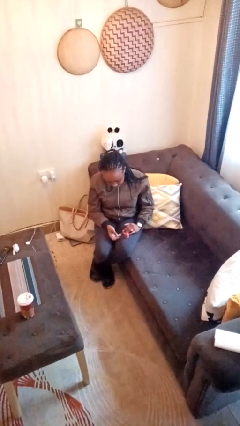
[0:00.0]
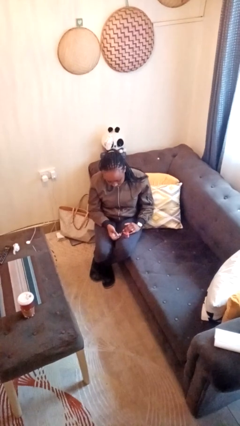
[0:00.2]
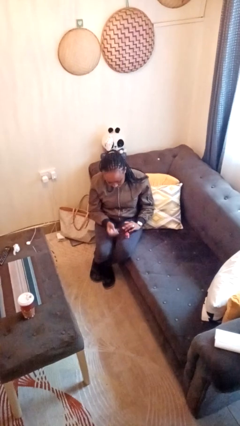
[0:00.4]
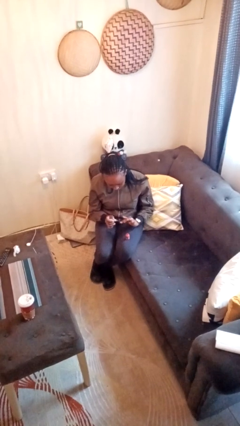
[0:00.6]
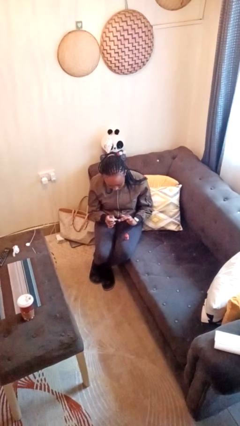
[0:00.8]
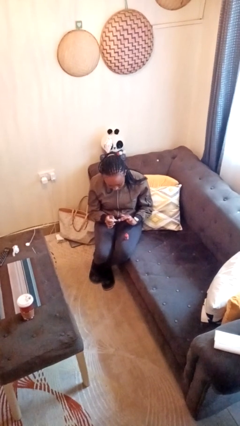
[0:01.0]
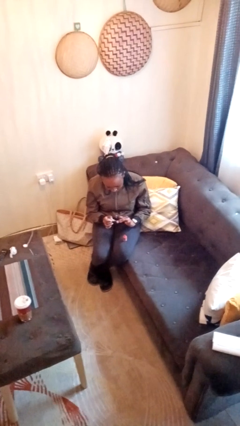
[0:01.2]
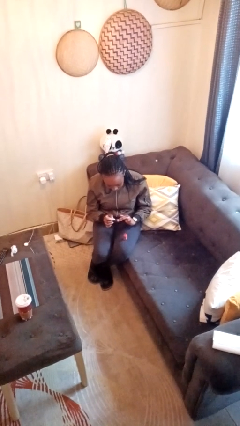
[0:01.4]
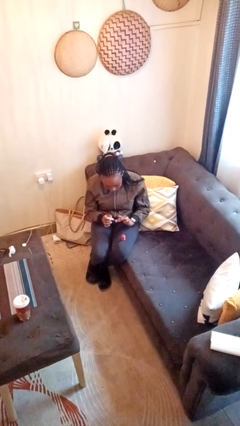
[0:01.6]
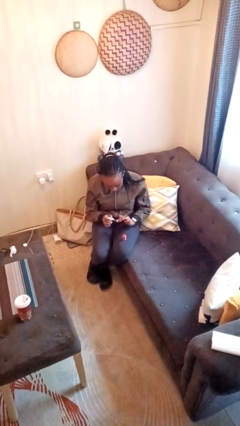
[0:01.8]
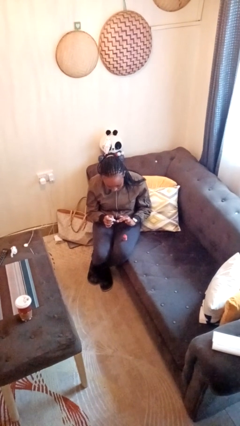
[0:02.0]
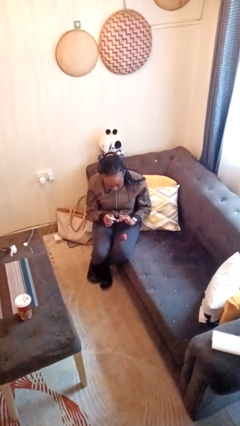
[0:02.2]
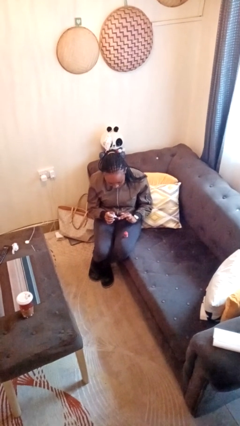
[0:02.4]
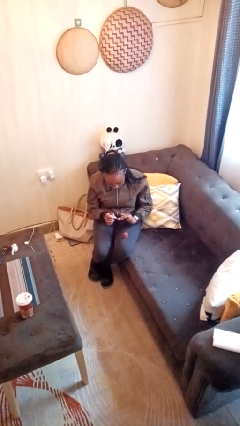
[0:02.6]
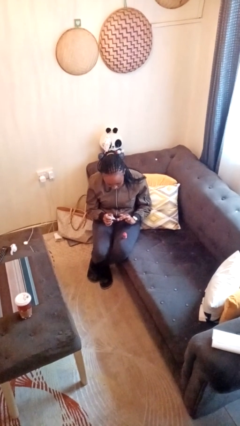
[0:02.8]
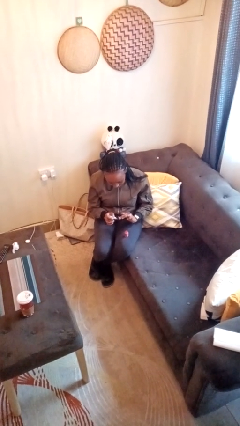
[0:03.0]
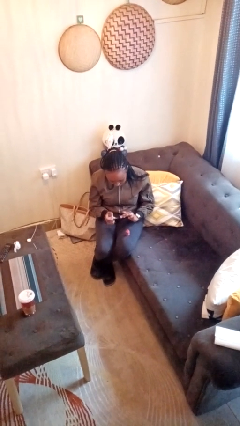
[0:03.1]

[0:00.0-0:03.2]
person paints fingernails

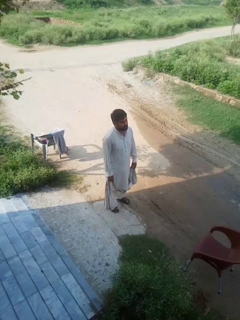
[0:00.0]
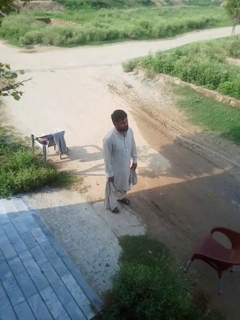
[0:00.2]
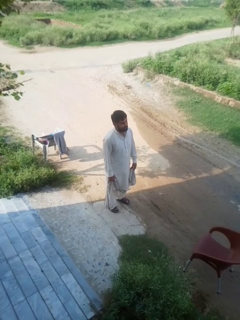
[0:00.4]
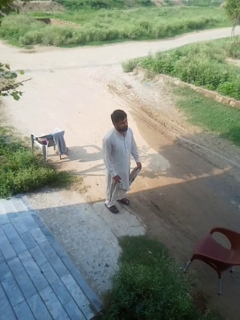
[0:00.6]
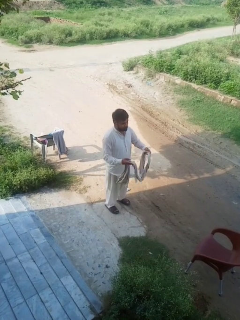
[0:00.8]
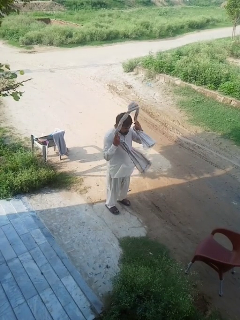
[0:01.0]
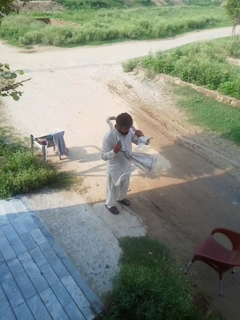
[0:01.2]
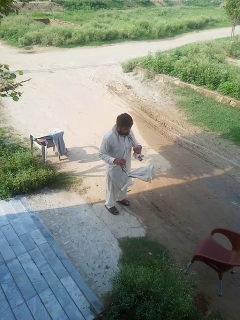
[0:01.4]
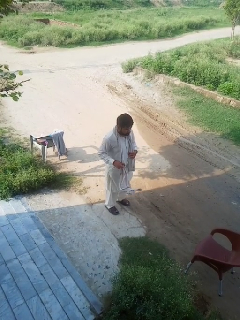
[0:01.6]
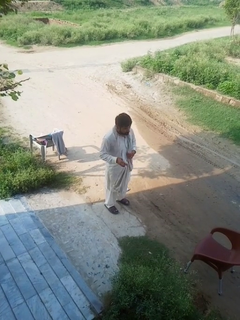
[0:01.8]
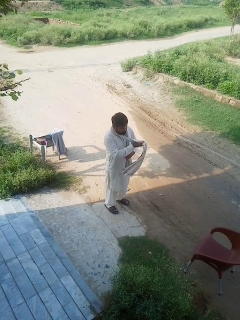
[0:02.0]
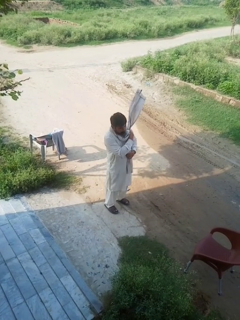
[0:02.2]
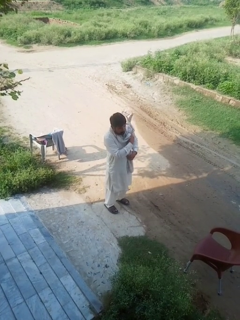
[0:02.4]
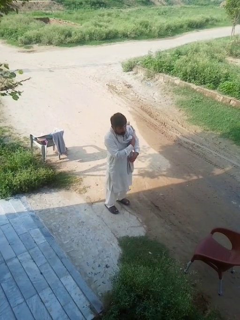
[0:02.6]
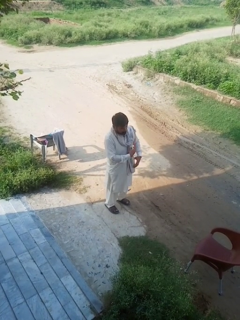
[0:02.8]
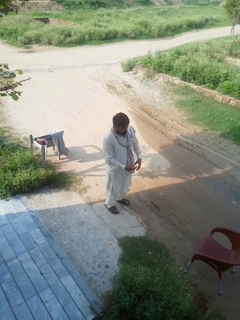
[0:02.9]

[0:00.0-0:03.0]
person puts on scarf

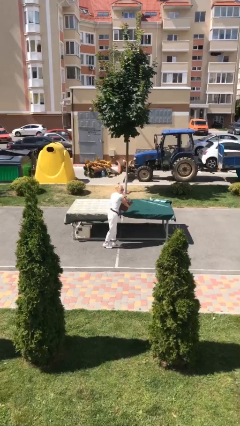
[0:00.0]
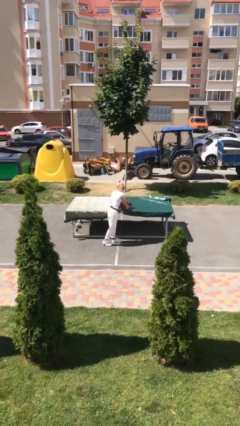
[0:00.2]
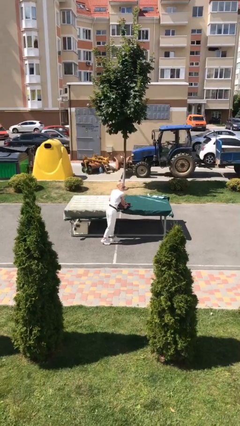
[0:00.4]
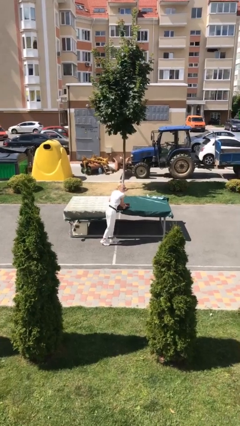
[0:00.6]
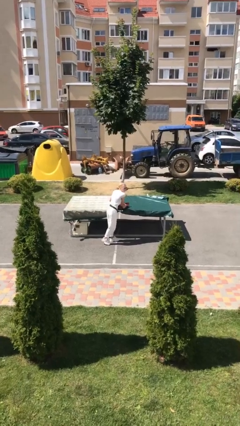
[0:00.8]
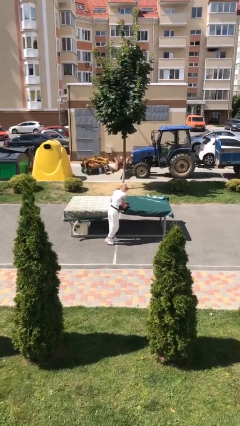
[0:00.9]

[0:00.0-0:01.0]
person puts down object on table

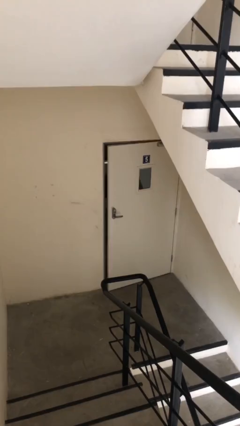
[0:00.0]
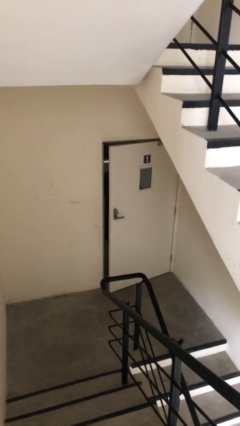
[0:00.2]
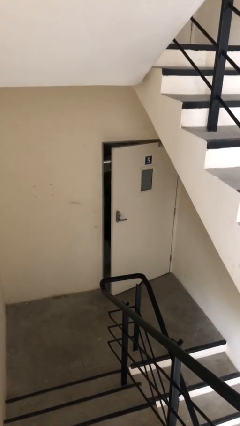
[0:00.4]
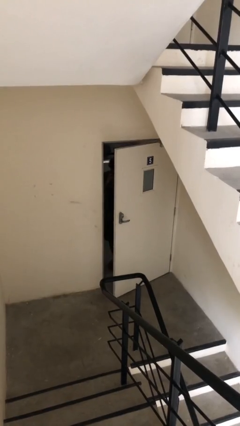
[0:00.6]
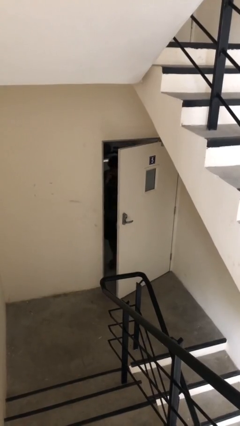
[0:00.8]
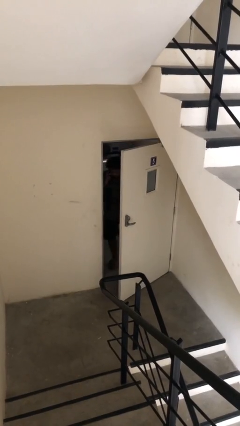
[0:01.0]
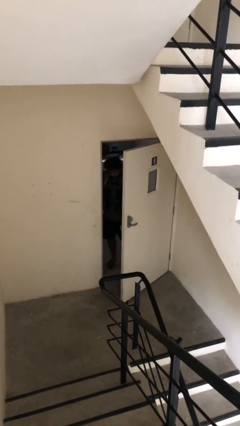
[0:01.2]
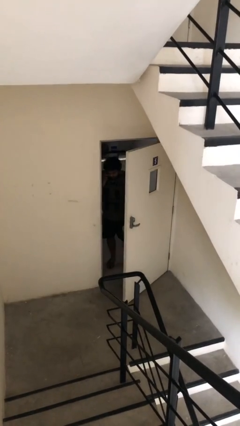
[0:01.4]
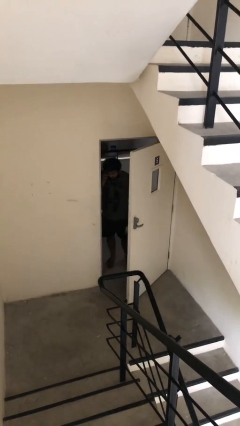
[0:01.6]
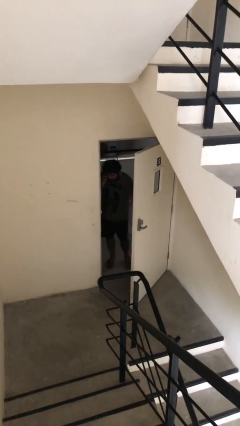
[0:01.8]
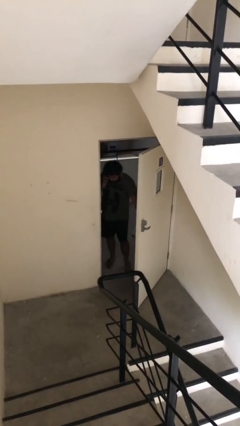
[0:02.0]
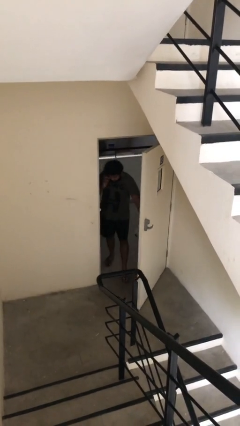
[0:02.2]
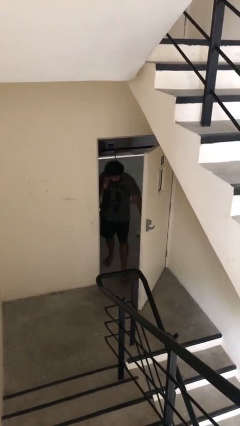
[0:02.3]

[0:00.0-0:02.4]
person opens facility door

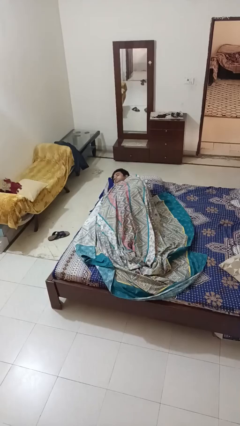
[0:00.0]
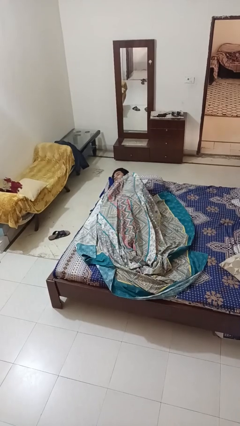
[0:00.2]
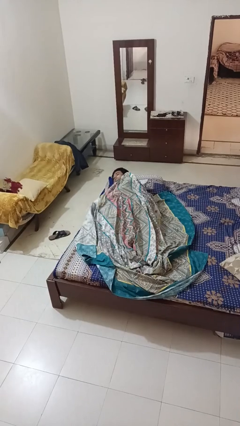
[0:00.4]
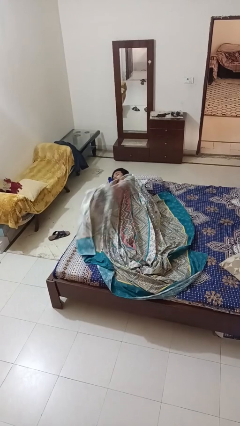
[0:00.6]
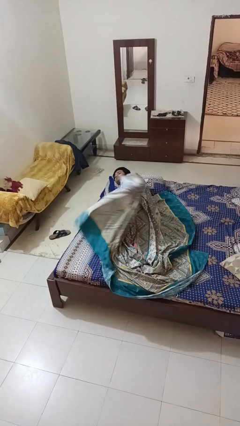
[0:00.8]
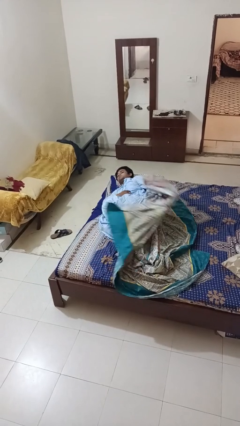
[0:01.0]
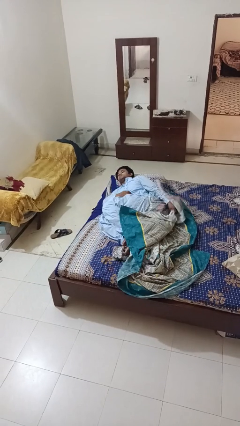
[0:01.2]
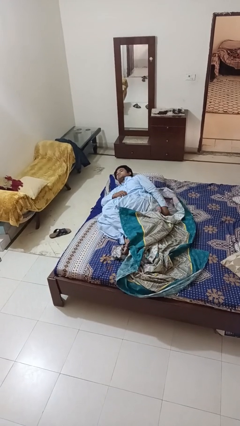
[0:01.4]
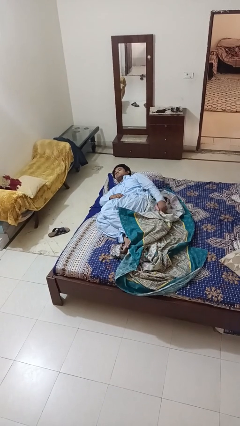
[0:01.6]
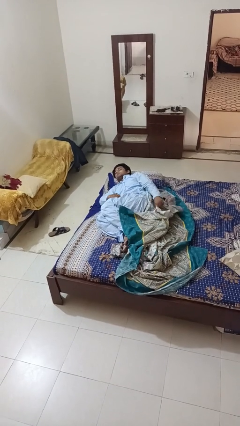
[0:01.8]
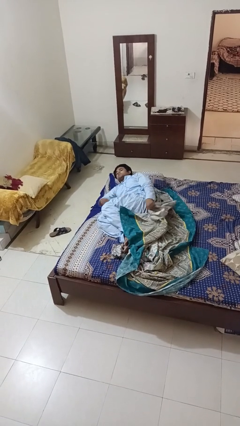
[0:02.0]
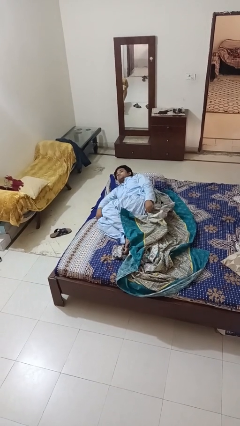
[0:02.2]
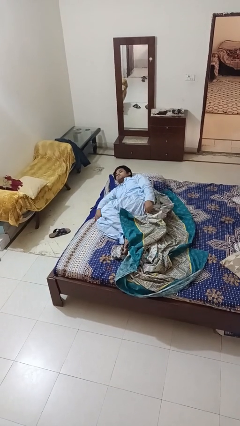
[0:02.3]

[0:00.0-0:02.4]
person uncovers with bedsheets

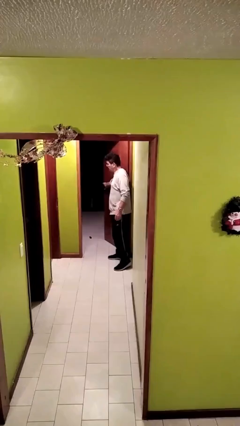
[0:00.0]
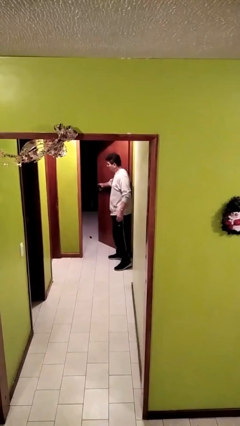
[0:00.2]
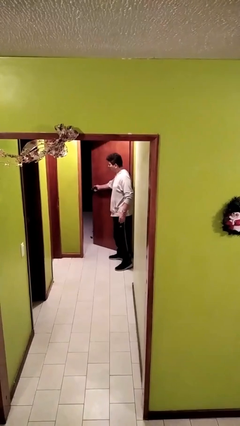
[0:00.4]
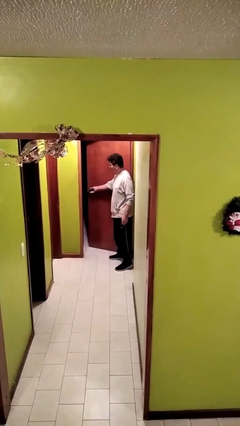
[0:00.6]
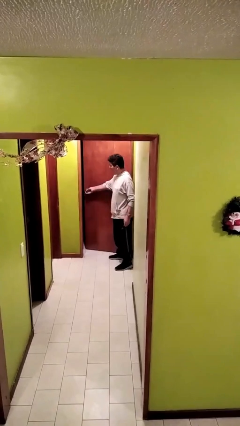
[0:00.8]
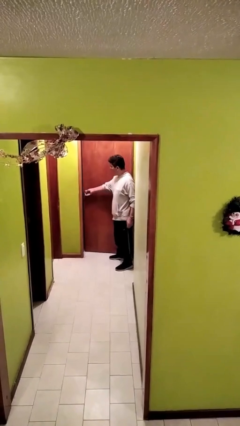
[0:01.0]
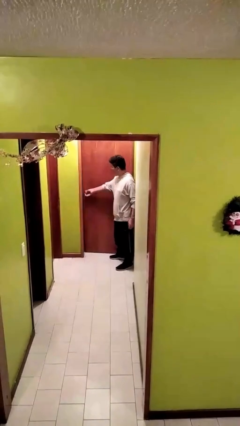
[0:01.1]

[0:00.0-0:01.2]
person closes facility door

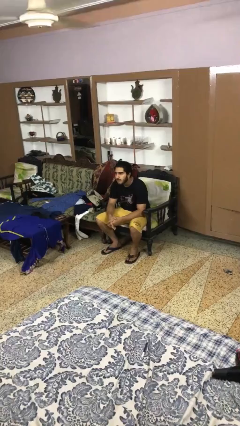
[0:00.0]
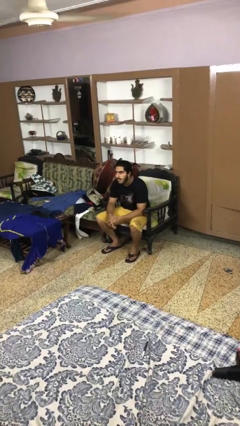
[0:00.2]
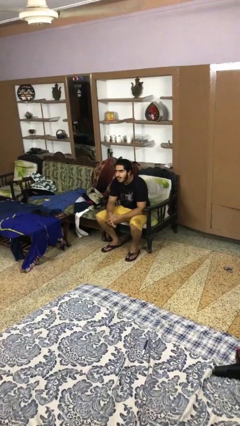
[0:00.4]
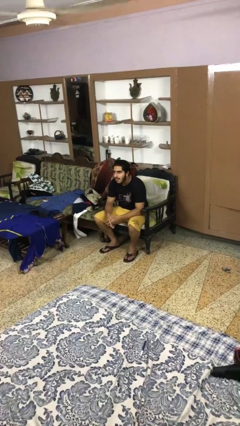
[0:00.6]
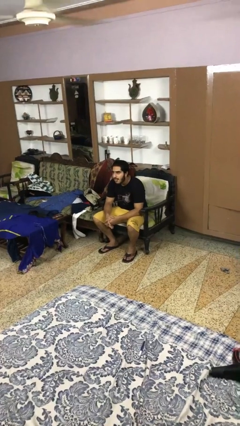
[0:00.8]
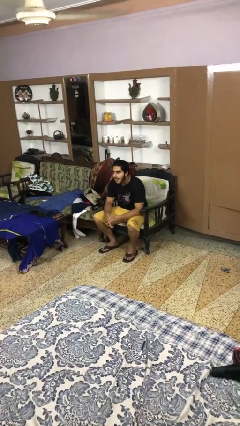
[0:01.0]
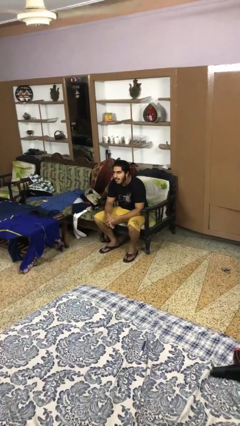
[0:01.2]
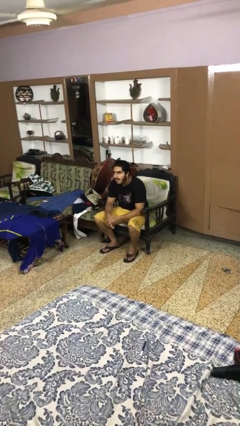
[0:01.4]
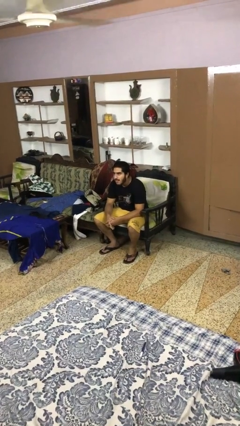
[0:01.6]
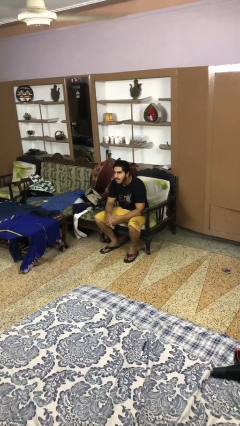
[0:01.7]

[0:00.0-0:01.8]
person sticks out tongue

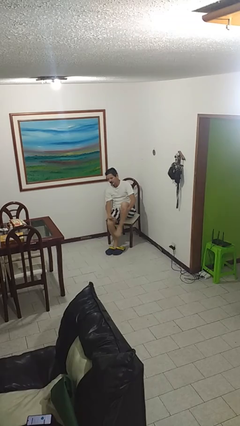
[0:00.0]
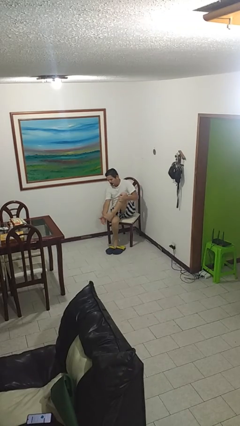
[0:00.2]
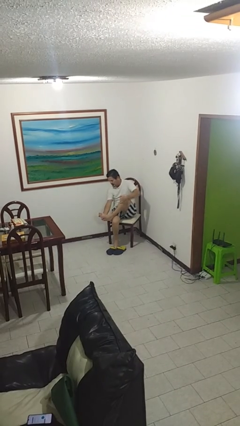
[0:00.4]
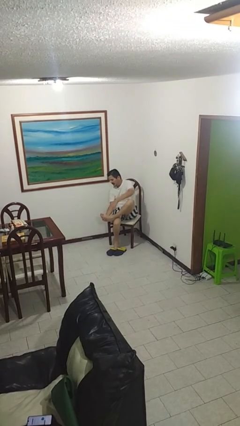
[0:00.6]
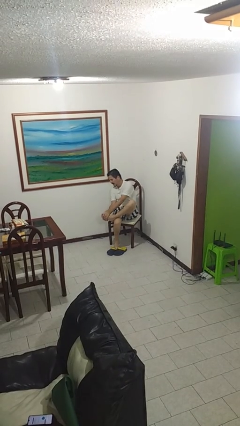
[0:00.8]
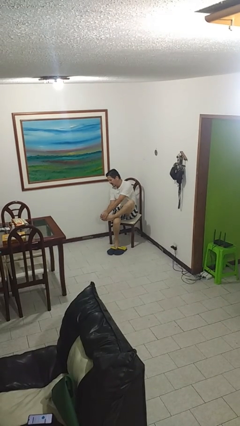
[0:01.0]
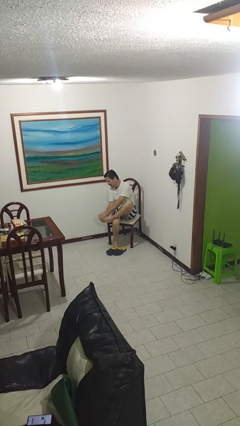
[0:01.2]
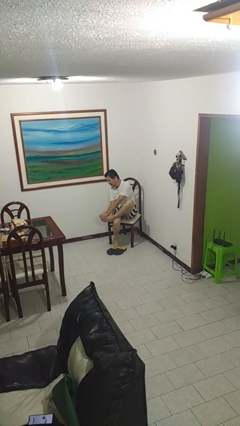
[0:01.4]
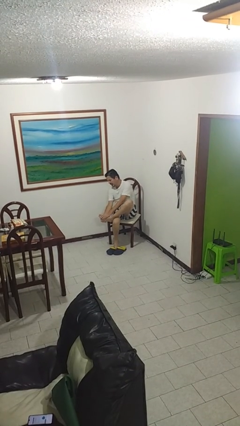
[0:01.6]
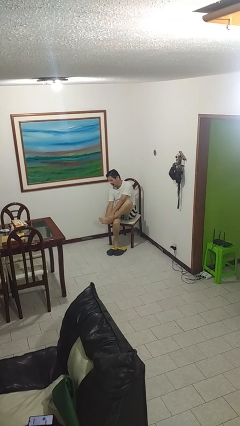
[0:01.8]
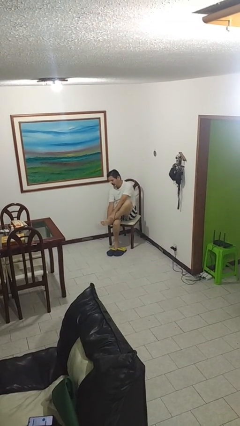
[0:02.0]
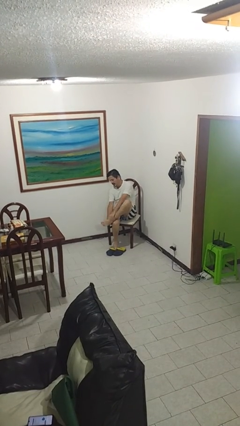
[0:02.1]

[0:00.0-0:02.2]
person rubs foot

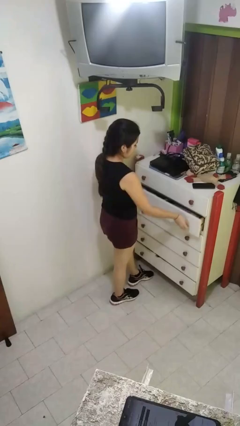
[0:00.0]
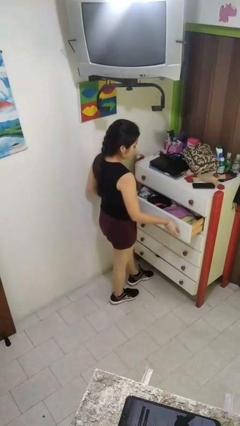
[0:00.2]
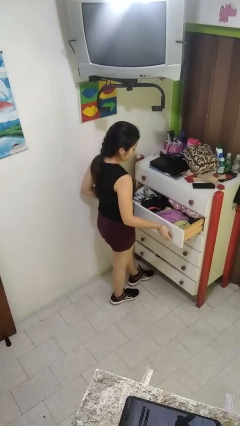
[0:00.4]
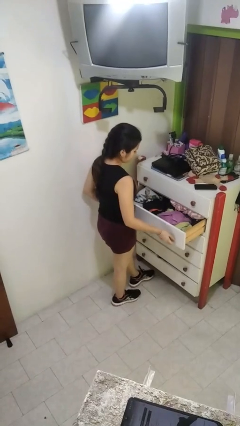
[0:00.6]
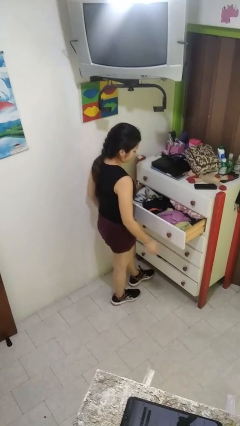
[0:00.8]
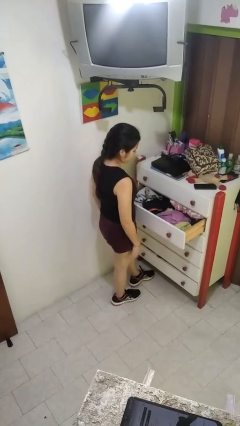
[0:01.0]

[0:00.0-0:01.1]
person opens dresser drawer
